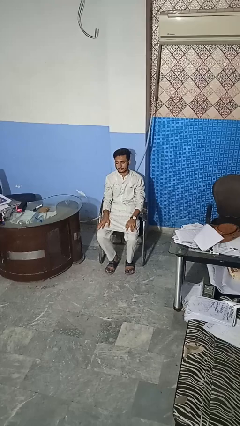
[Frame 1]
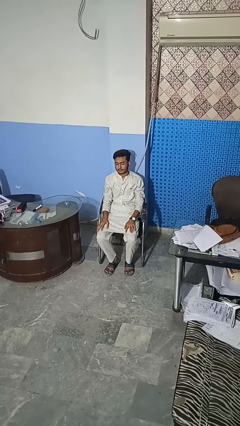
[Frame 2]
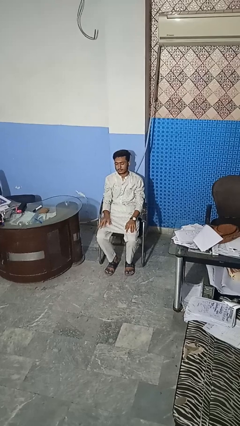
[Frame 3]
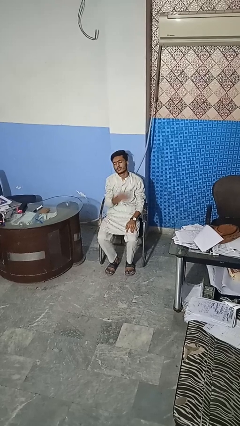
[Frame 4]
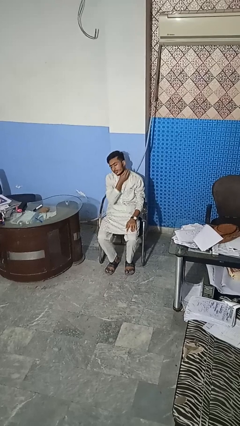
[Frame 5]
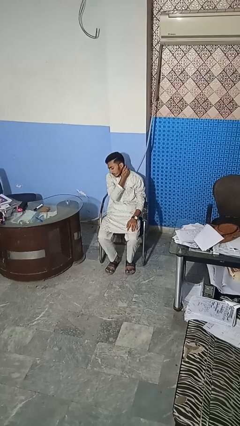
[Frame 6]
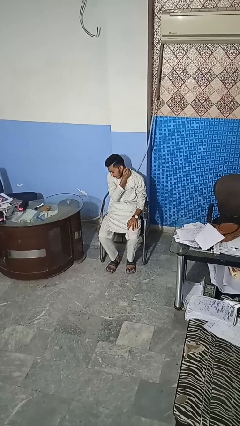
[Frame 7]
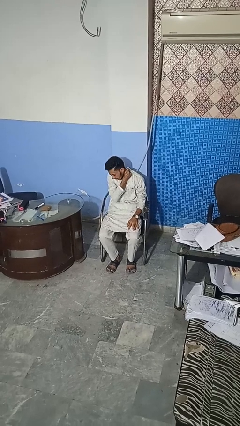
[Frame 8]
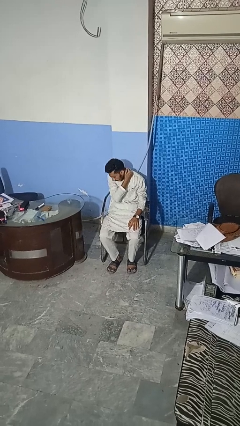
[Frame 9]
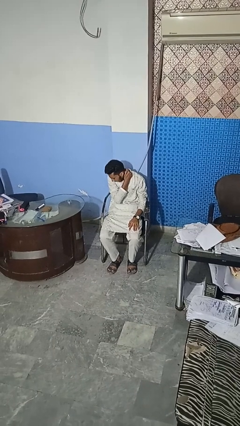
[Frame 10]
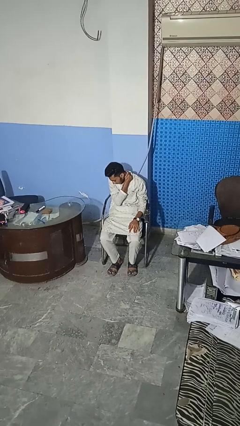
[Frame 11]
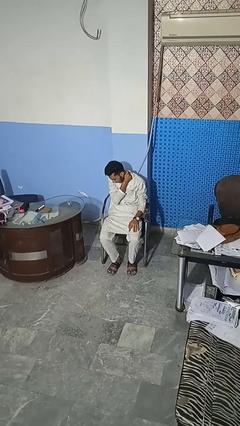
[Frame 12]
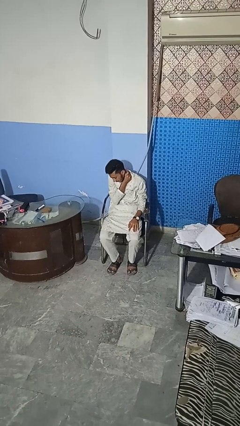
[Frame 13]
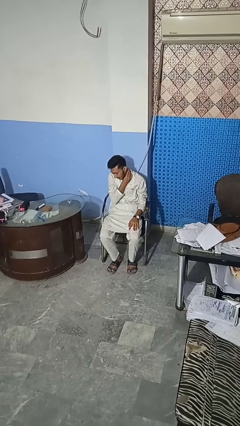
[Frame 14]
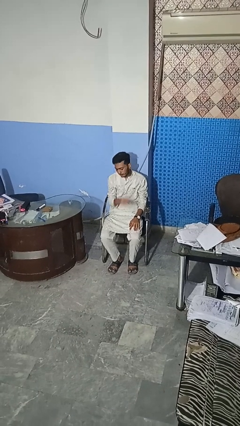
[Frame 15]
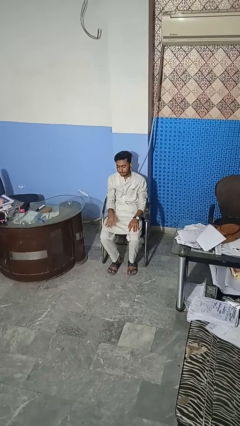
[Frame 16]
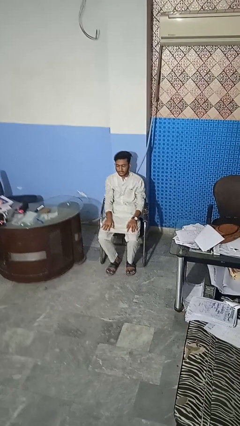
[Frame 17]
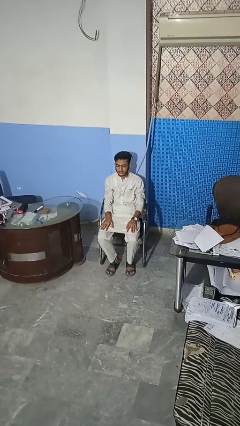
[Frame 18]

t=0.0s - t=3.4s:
person rubs neck

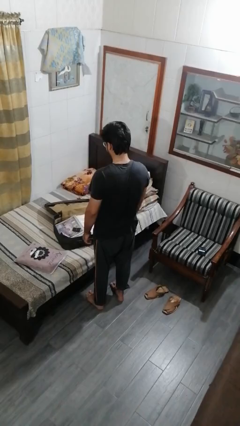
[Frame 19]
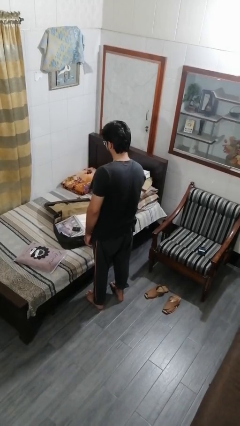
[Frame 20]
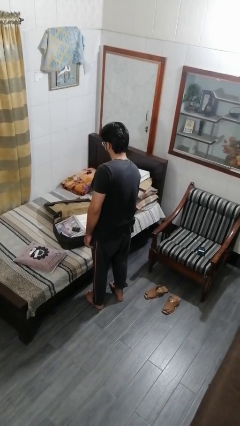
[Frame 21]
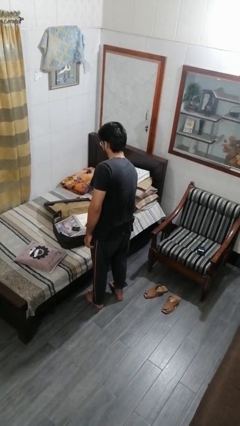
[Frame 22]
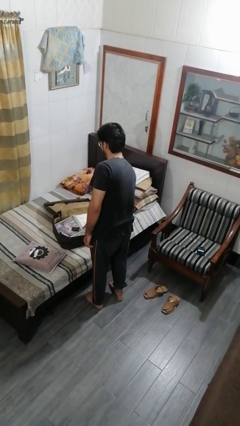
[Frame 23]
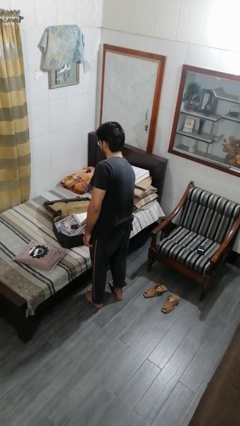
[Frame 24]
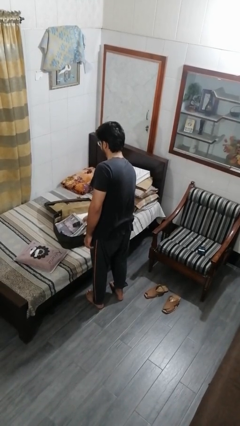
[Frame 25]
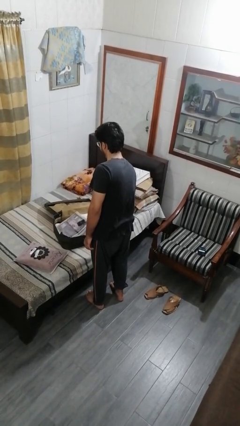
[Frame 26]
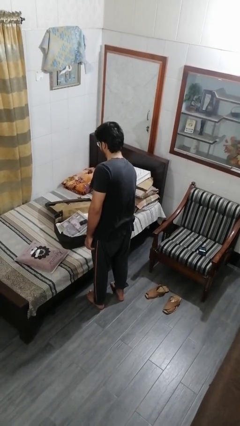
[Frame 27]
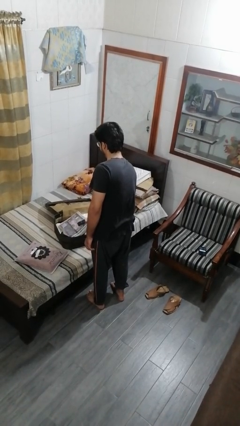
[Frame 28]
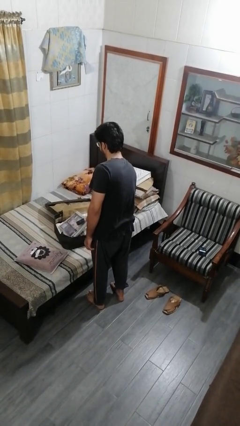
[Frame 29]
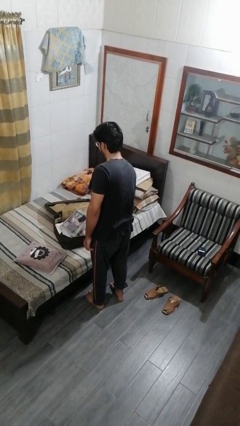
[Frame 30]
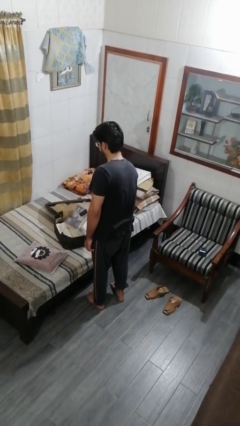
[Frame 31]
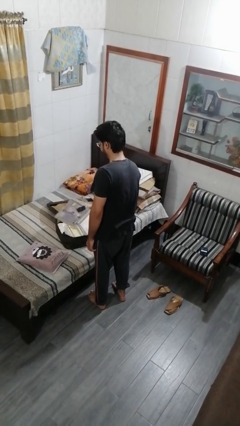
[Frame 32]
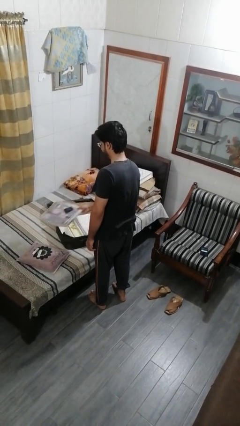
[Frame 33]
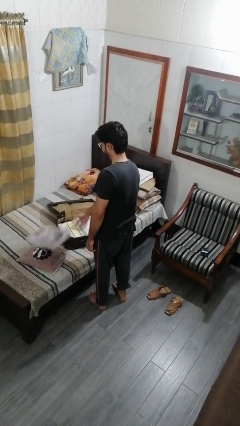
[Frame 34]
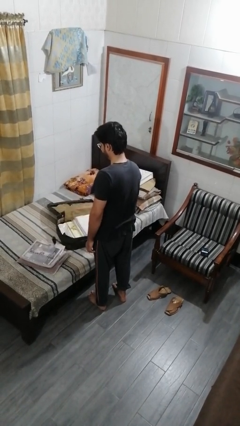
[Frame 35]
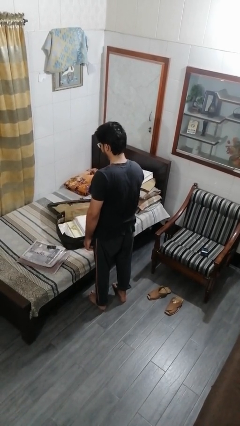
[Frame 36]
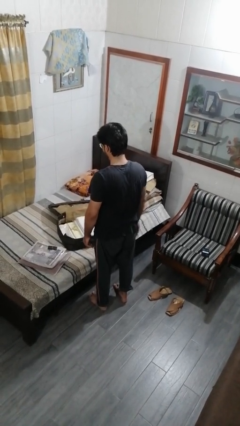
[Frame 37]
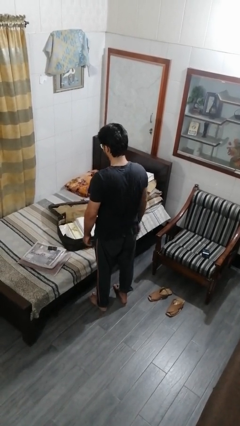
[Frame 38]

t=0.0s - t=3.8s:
person unloads clothes from suitcase

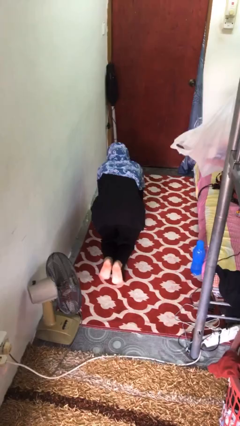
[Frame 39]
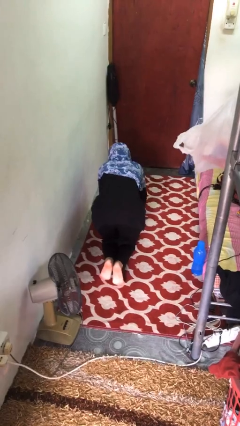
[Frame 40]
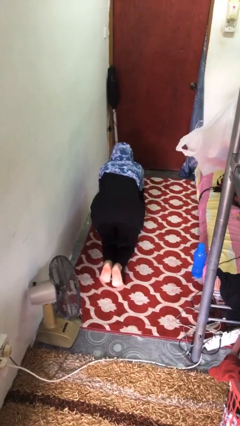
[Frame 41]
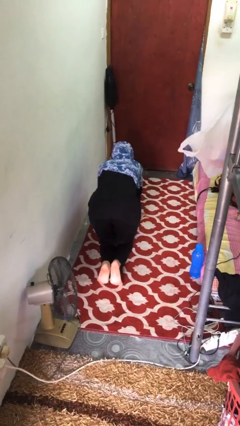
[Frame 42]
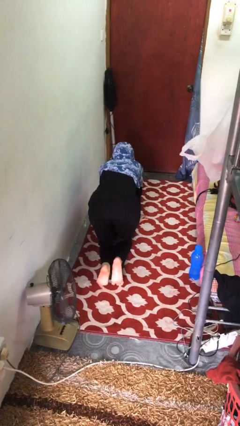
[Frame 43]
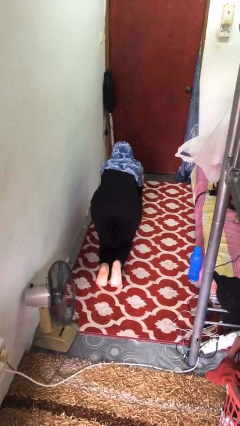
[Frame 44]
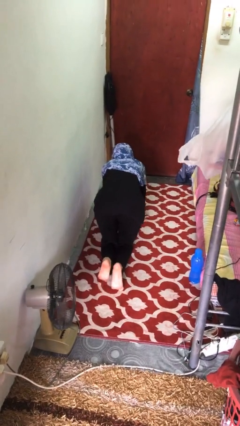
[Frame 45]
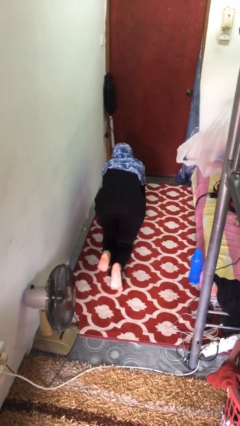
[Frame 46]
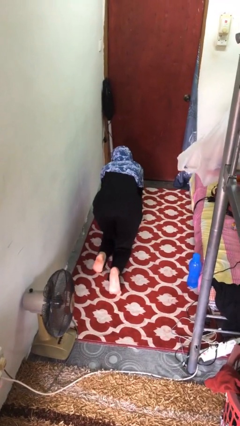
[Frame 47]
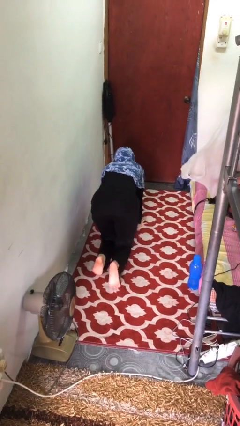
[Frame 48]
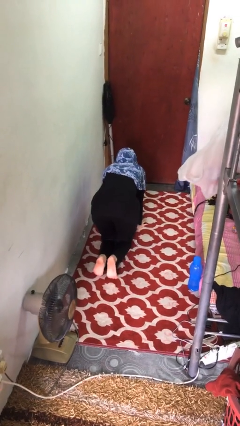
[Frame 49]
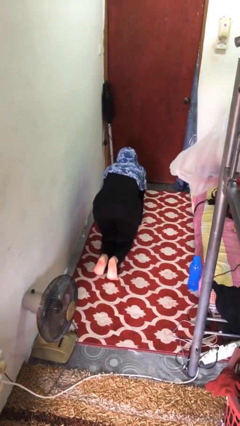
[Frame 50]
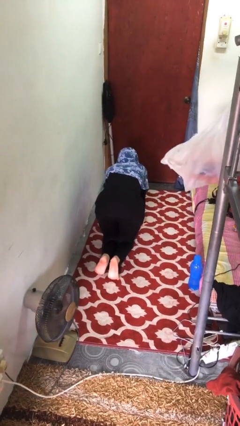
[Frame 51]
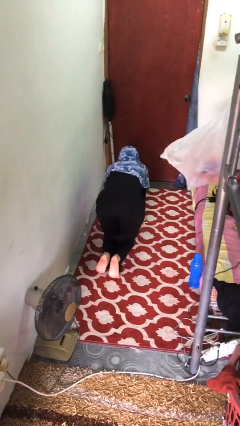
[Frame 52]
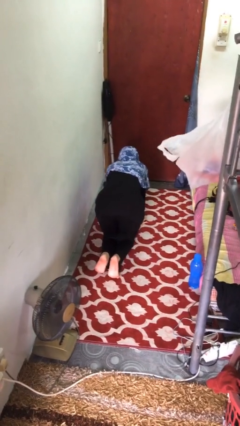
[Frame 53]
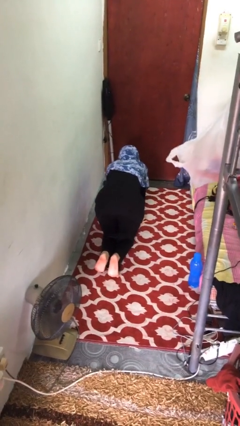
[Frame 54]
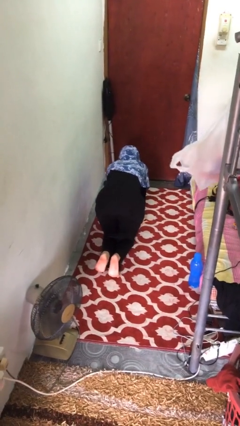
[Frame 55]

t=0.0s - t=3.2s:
person crawls

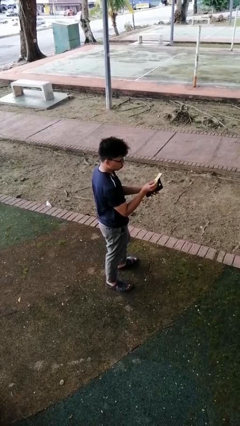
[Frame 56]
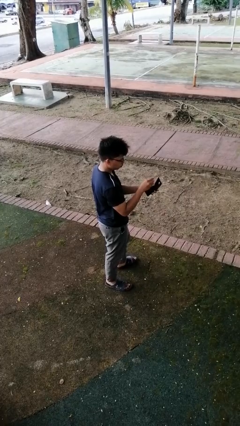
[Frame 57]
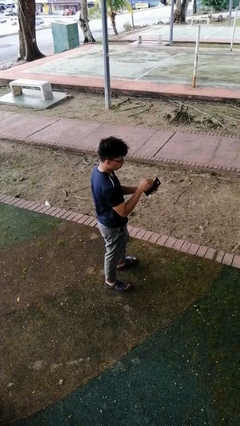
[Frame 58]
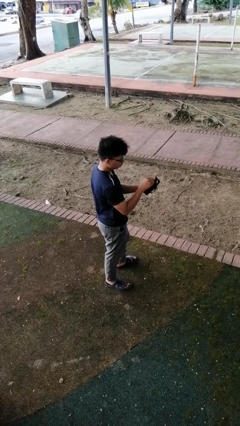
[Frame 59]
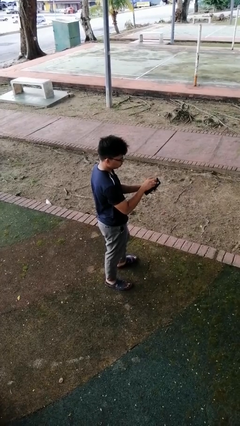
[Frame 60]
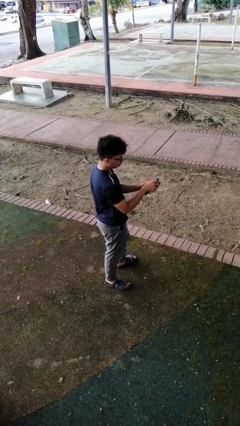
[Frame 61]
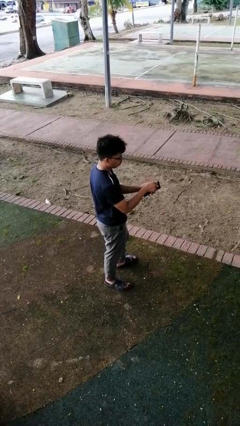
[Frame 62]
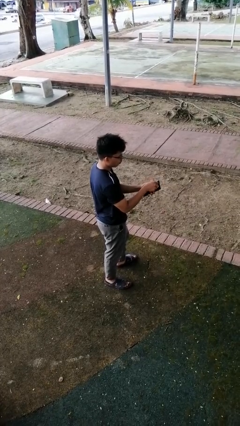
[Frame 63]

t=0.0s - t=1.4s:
person puts object into purse

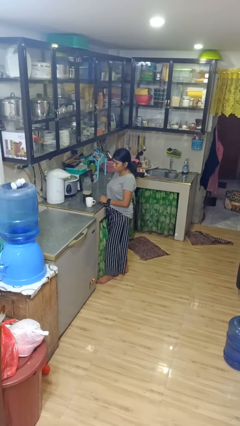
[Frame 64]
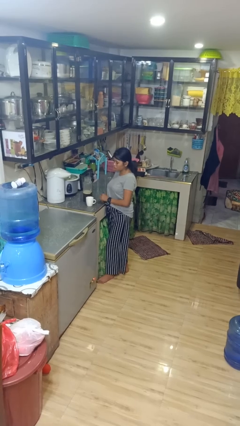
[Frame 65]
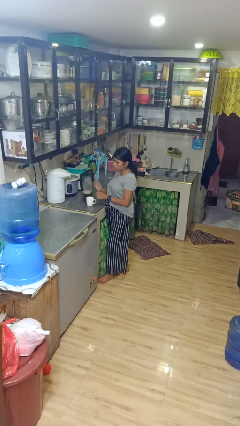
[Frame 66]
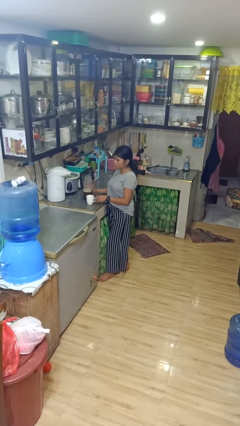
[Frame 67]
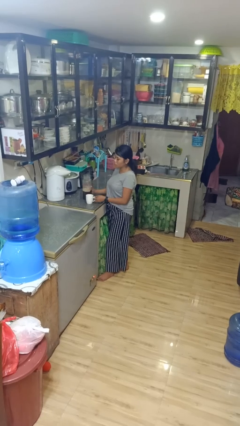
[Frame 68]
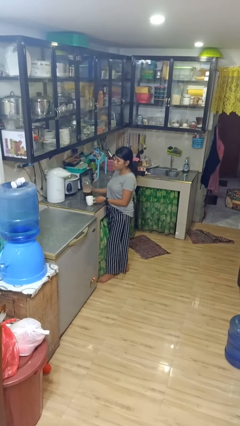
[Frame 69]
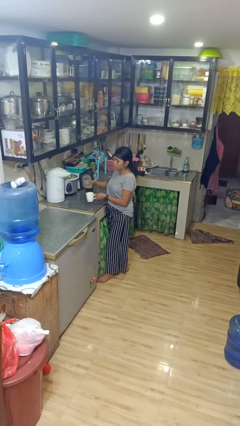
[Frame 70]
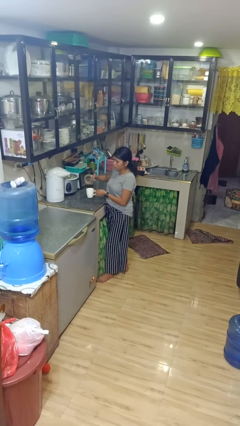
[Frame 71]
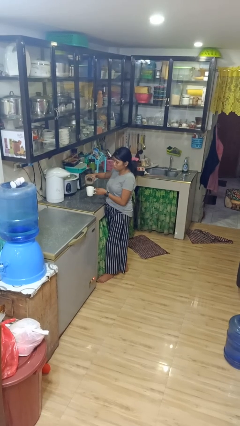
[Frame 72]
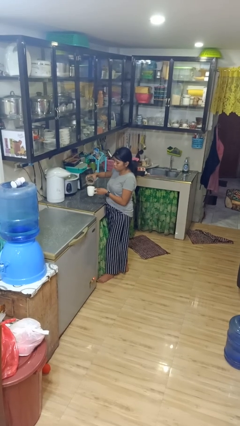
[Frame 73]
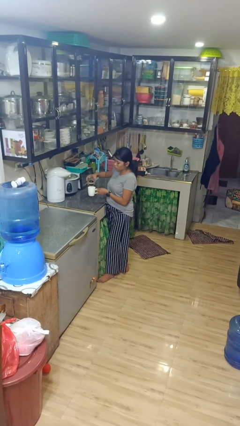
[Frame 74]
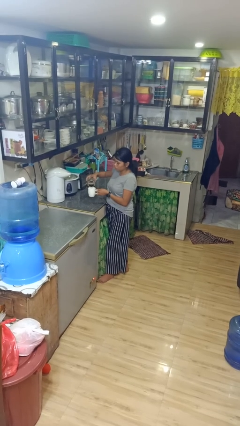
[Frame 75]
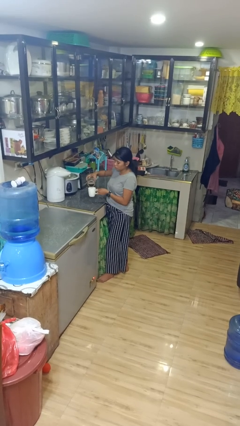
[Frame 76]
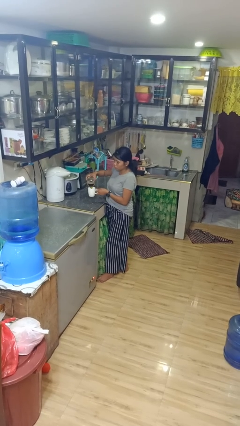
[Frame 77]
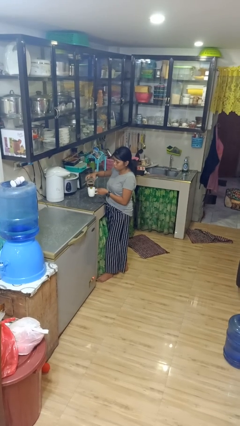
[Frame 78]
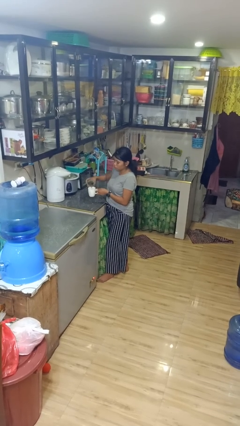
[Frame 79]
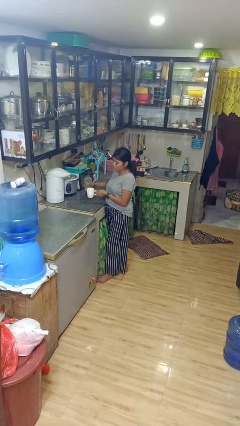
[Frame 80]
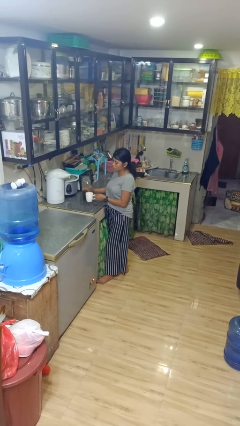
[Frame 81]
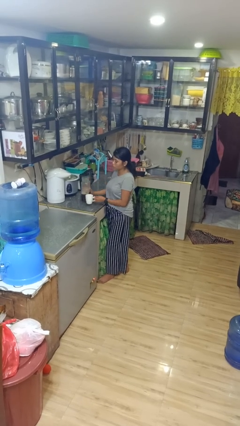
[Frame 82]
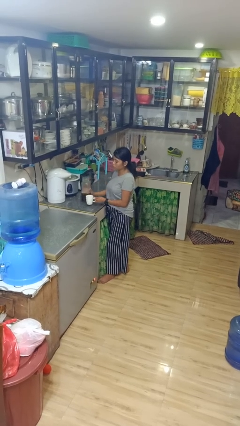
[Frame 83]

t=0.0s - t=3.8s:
person pours coffee into mug

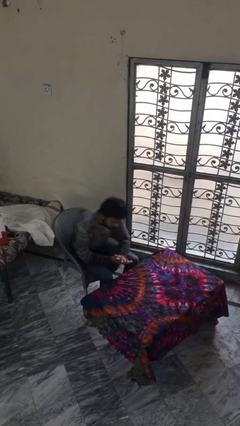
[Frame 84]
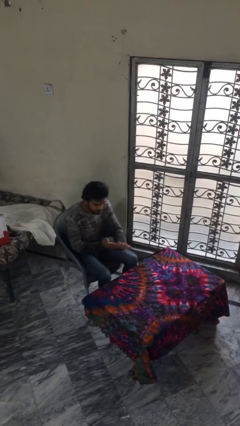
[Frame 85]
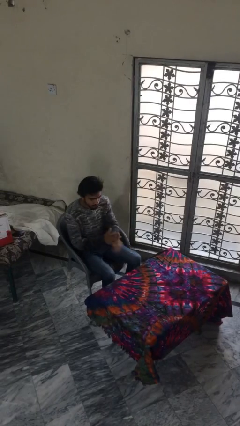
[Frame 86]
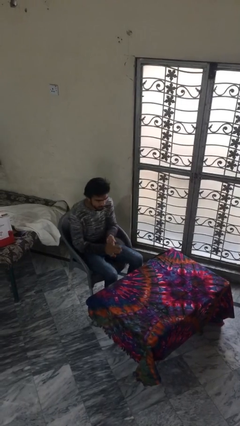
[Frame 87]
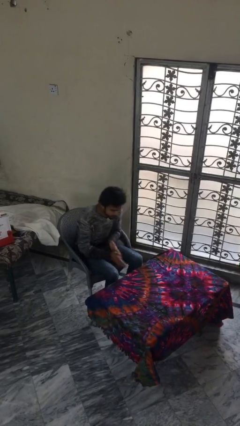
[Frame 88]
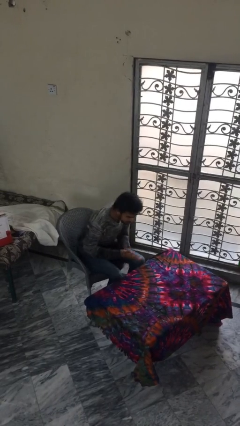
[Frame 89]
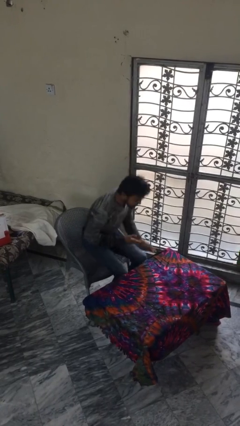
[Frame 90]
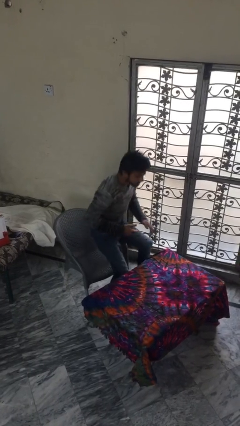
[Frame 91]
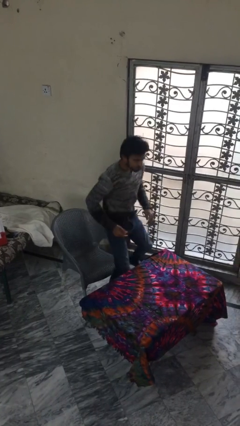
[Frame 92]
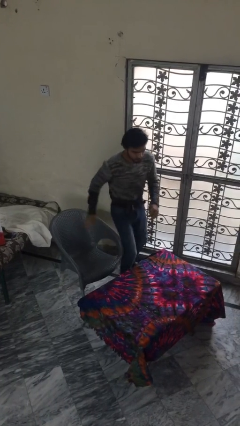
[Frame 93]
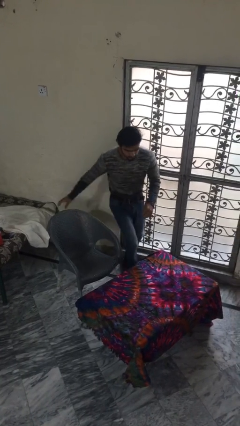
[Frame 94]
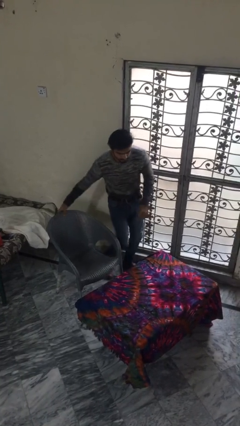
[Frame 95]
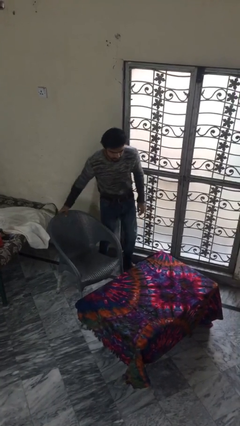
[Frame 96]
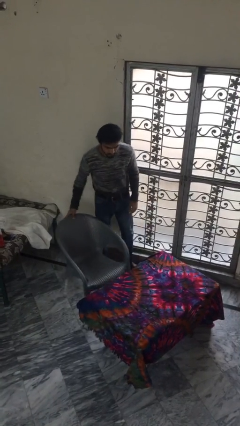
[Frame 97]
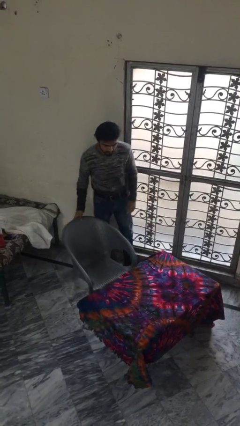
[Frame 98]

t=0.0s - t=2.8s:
person stands up
